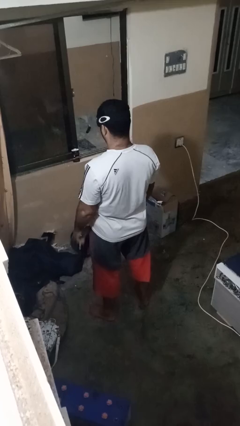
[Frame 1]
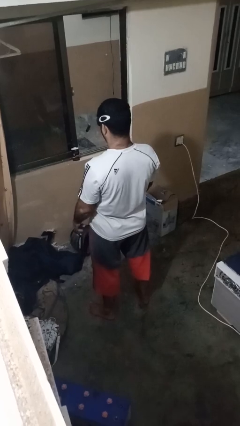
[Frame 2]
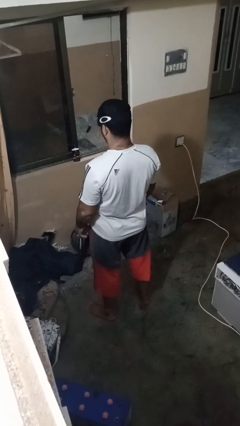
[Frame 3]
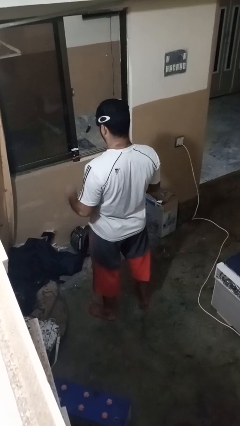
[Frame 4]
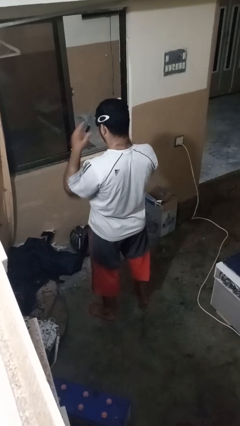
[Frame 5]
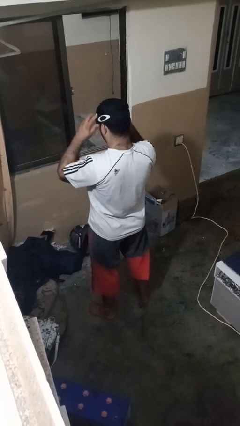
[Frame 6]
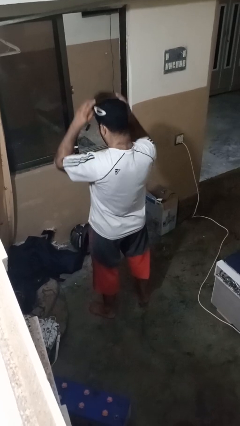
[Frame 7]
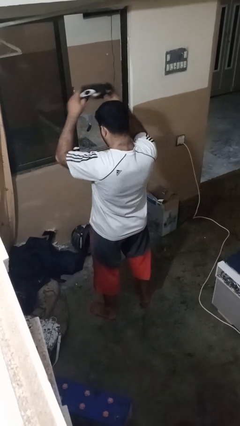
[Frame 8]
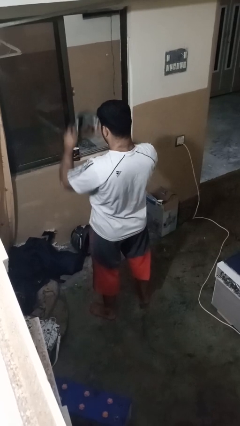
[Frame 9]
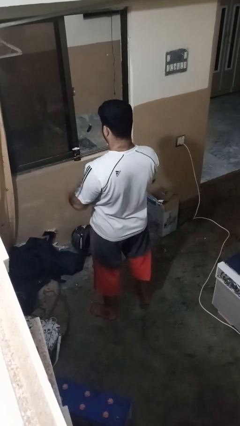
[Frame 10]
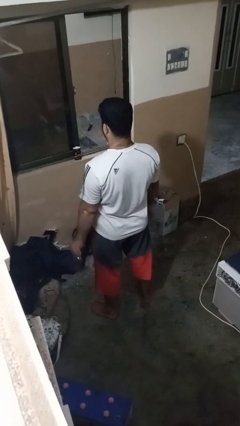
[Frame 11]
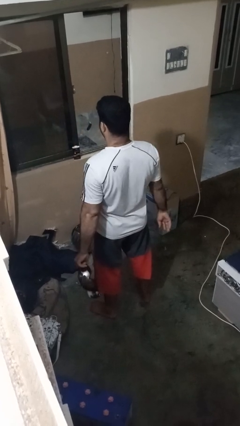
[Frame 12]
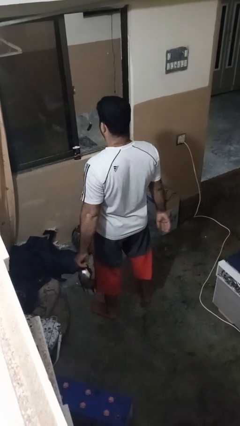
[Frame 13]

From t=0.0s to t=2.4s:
person takes off sunglasses

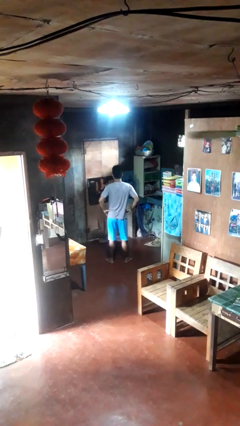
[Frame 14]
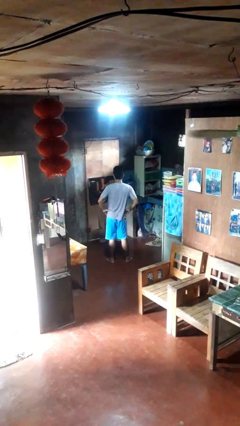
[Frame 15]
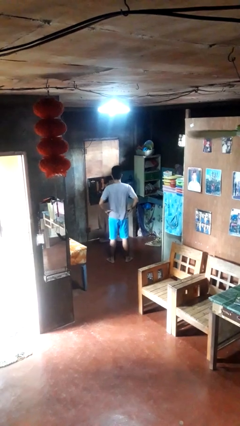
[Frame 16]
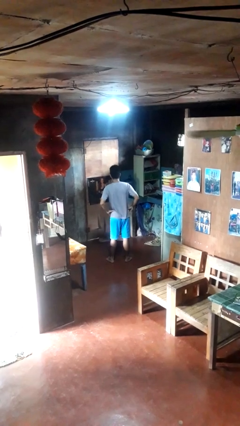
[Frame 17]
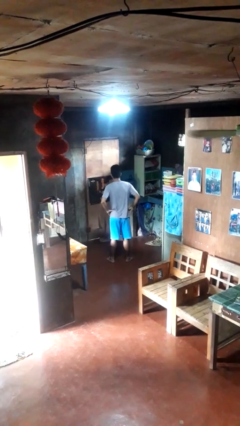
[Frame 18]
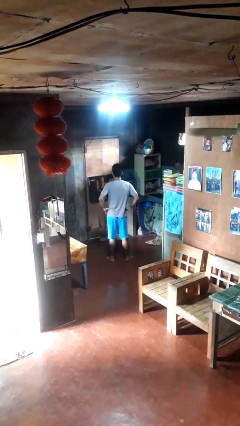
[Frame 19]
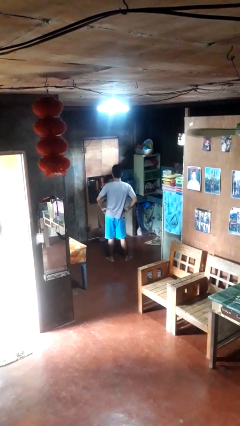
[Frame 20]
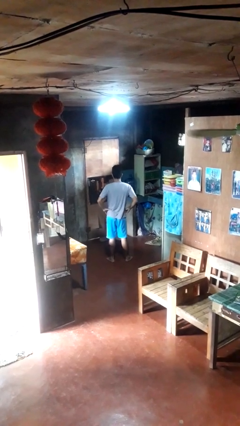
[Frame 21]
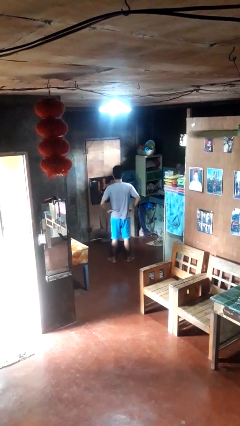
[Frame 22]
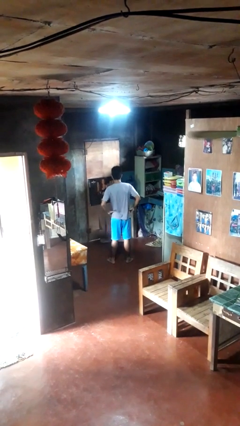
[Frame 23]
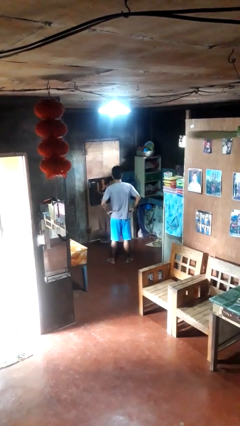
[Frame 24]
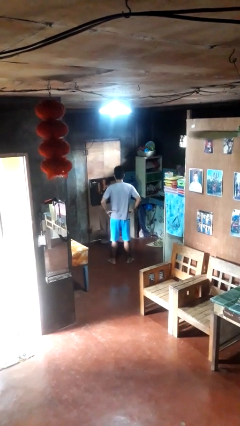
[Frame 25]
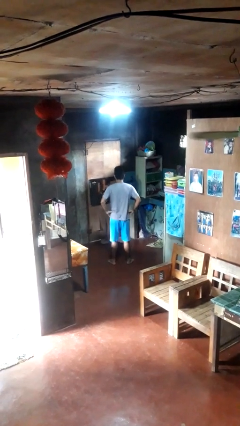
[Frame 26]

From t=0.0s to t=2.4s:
person wiggles hips

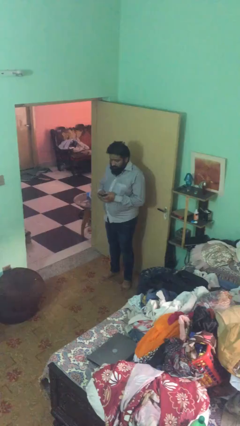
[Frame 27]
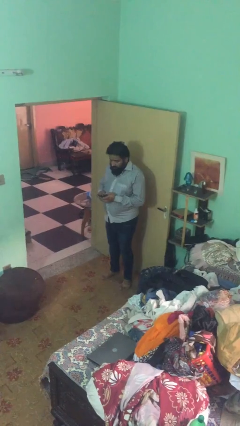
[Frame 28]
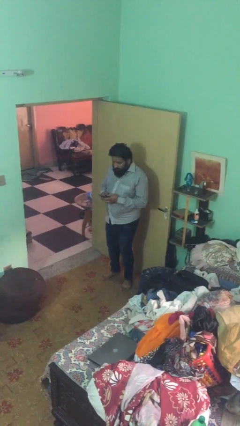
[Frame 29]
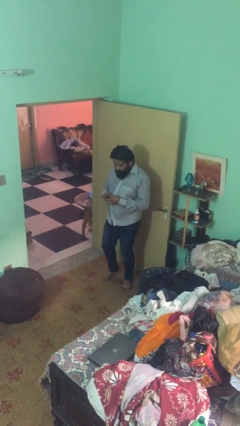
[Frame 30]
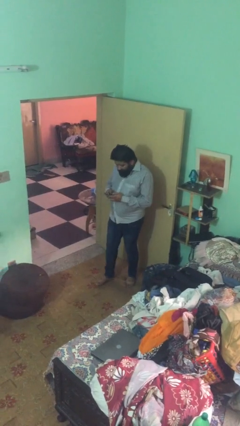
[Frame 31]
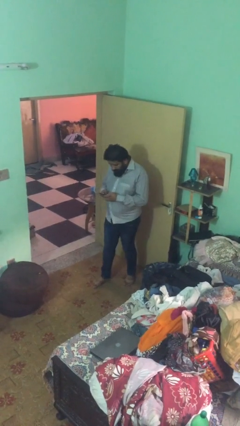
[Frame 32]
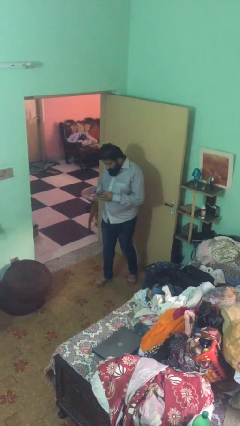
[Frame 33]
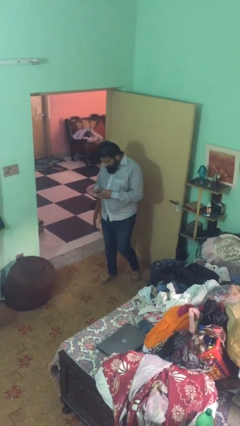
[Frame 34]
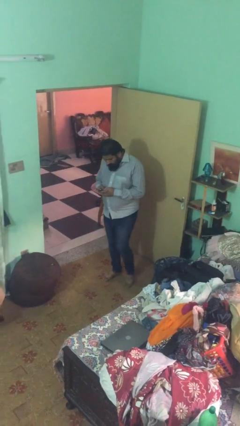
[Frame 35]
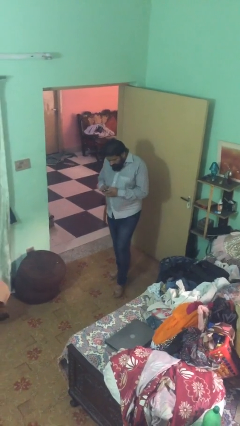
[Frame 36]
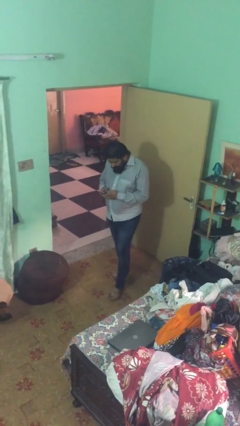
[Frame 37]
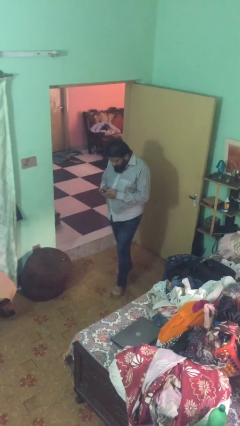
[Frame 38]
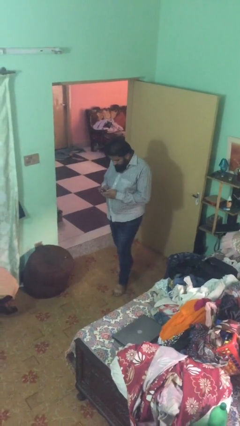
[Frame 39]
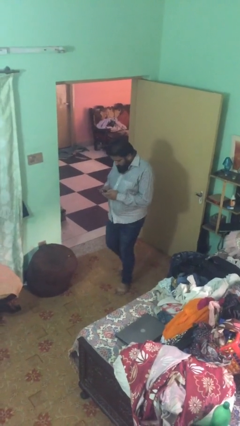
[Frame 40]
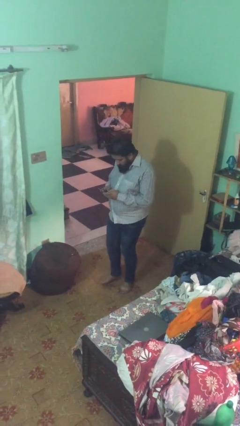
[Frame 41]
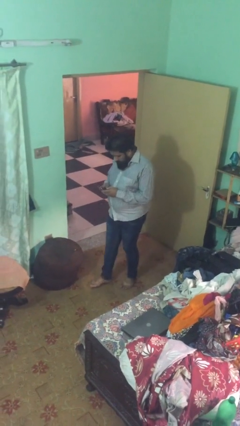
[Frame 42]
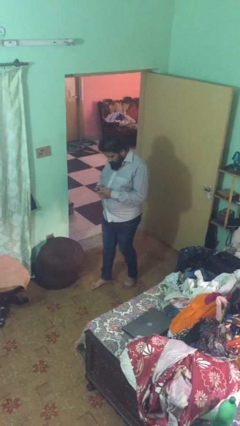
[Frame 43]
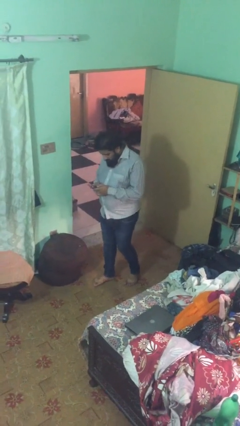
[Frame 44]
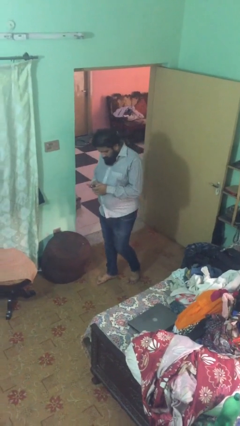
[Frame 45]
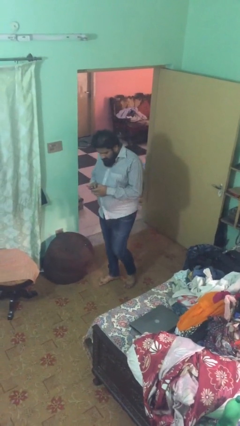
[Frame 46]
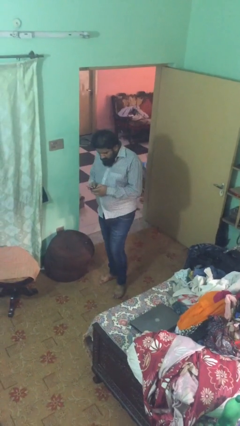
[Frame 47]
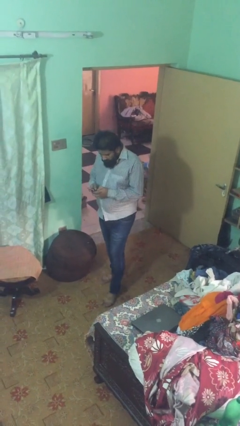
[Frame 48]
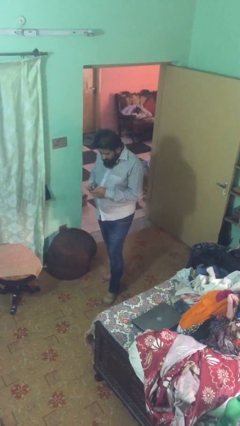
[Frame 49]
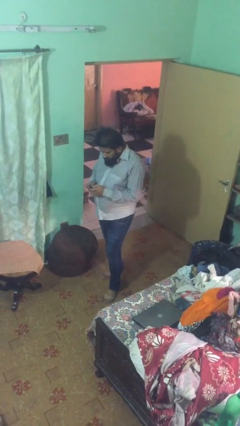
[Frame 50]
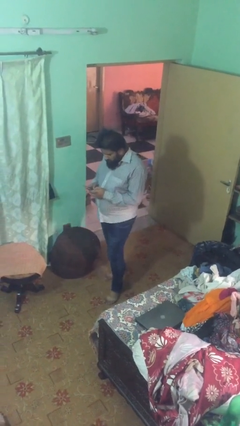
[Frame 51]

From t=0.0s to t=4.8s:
person texts on phone

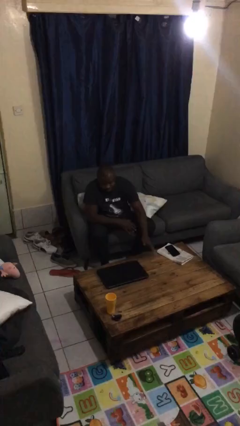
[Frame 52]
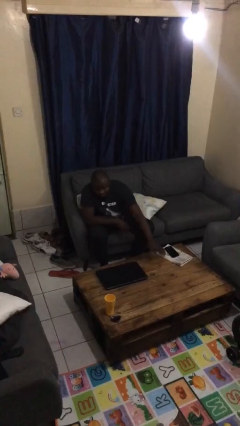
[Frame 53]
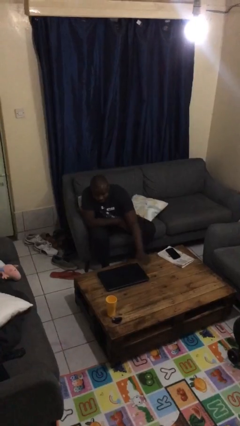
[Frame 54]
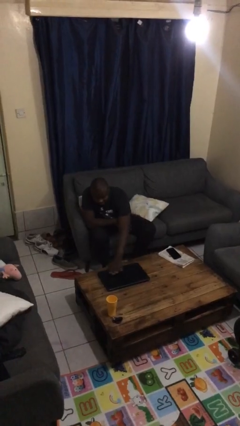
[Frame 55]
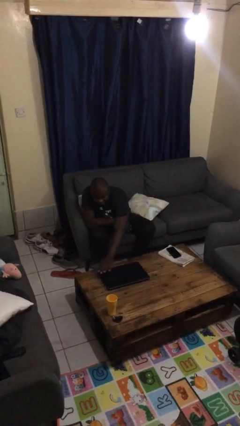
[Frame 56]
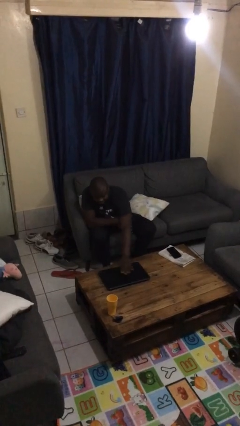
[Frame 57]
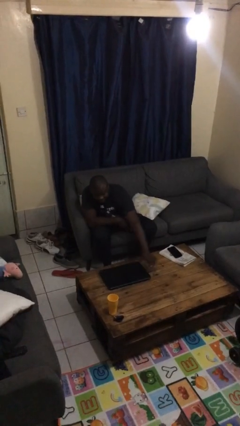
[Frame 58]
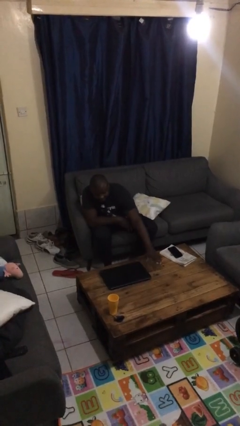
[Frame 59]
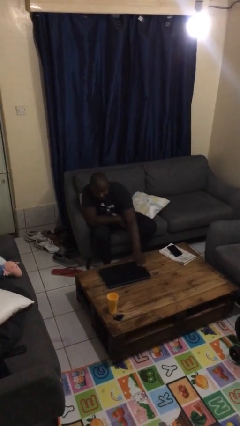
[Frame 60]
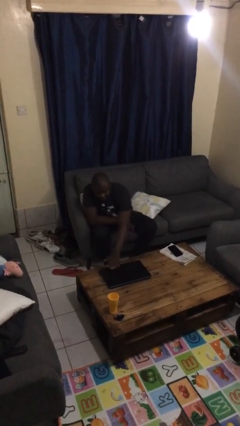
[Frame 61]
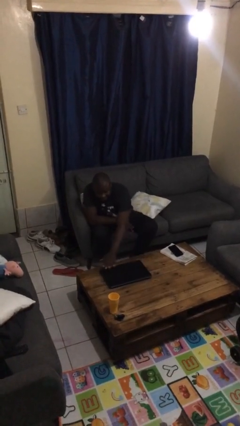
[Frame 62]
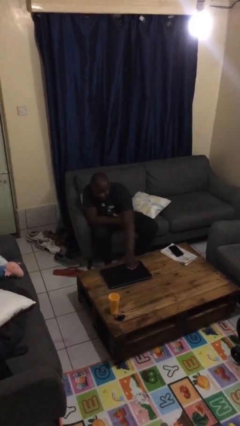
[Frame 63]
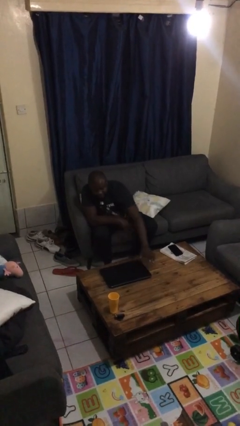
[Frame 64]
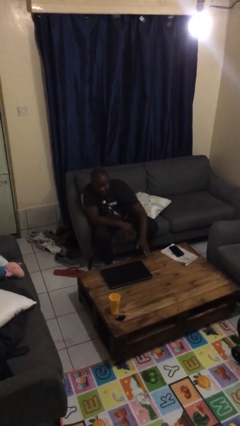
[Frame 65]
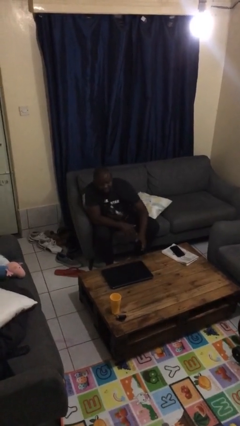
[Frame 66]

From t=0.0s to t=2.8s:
person waves hand over object

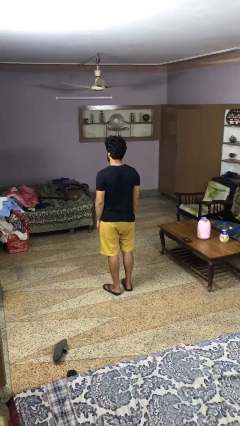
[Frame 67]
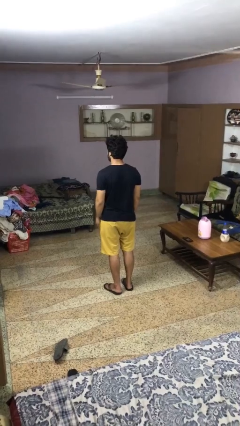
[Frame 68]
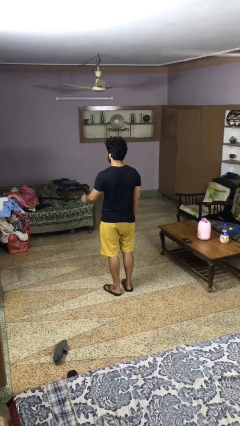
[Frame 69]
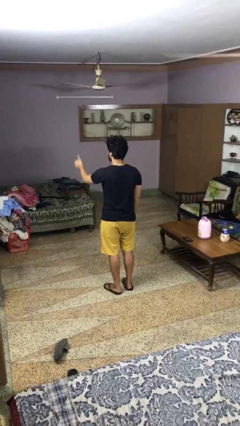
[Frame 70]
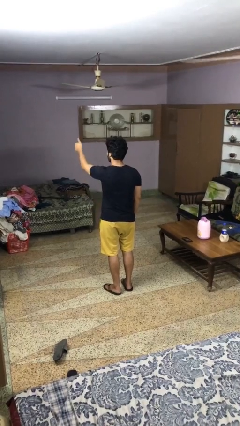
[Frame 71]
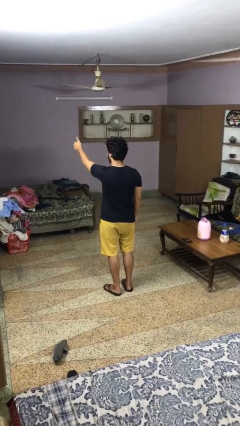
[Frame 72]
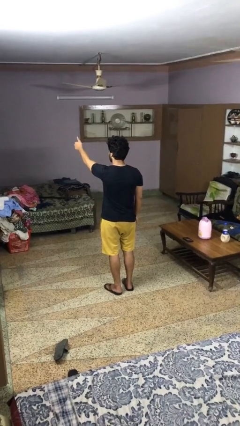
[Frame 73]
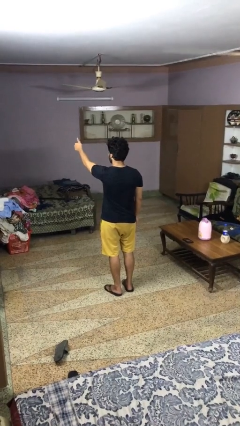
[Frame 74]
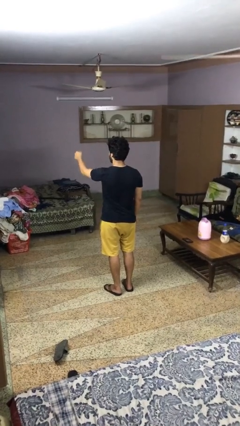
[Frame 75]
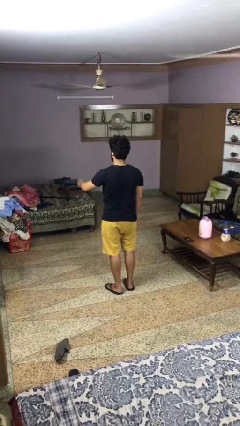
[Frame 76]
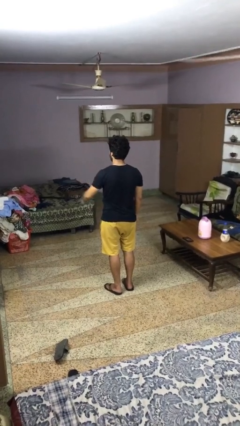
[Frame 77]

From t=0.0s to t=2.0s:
person gestures thumbs up

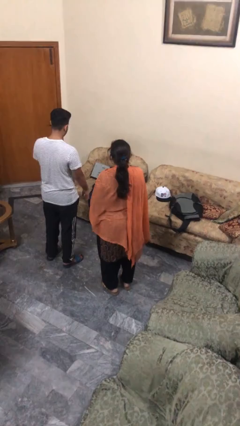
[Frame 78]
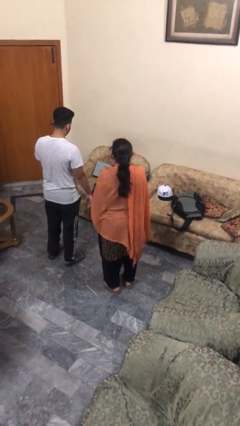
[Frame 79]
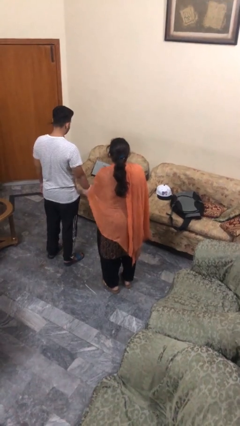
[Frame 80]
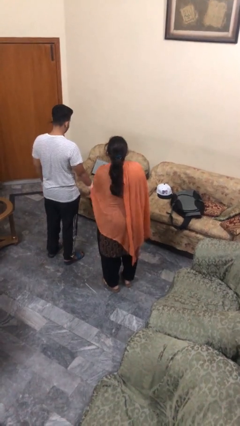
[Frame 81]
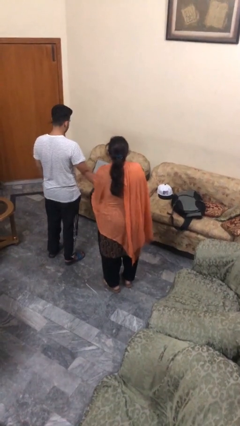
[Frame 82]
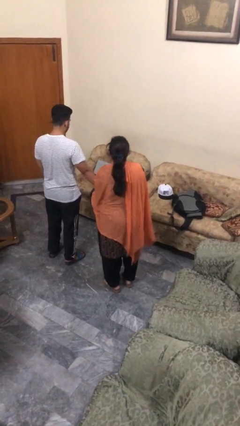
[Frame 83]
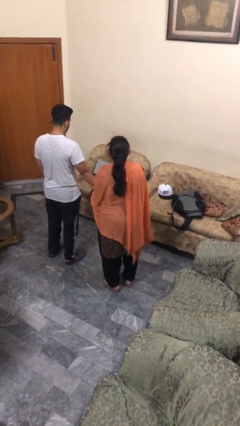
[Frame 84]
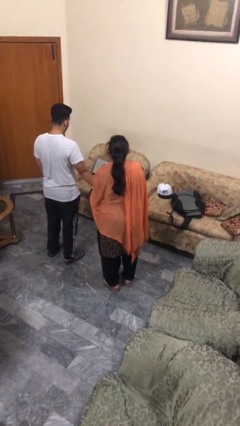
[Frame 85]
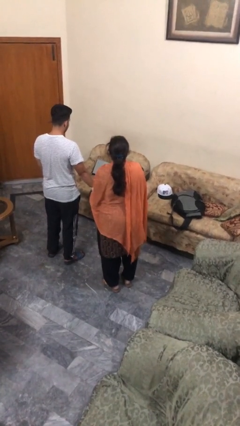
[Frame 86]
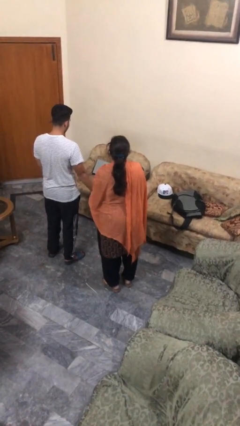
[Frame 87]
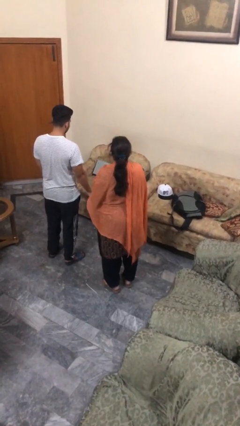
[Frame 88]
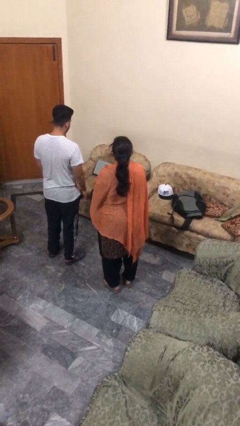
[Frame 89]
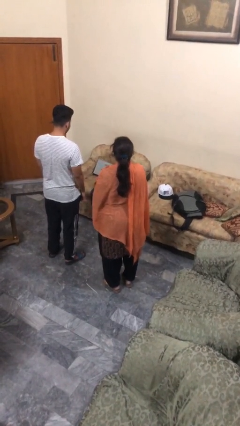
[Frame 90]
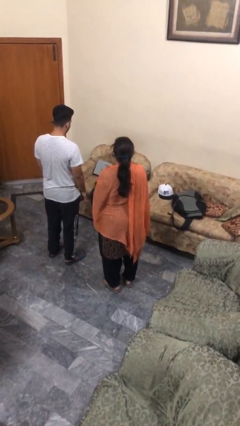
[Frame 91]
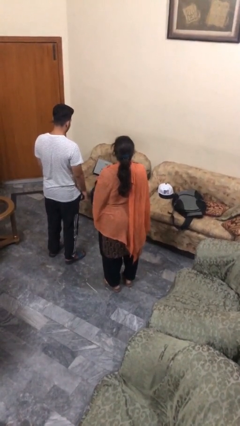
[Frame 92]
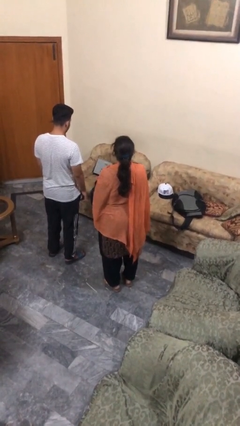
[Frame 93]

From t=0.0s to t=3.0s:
person grabs person by forearm
